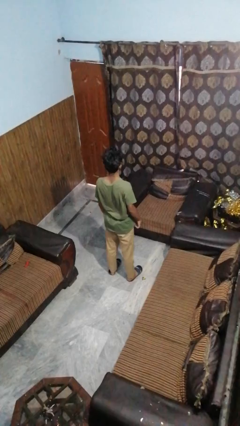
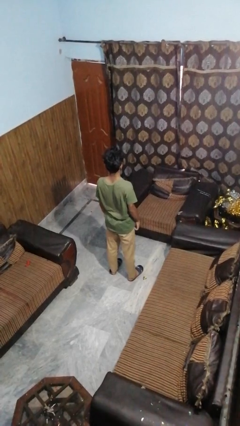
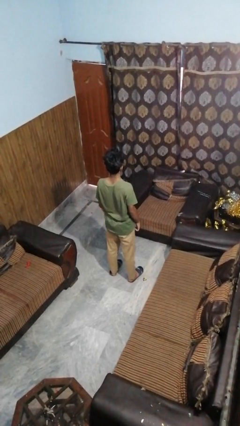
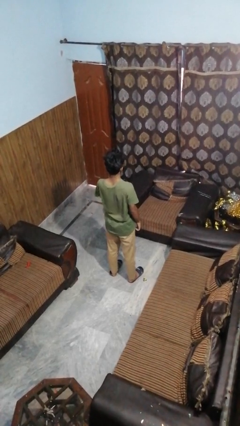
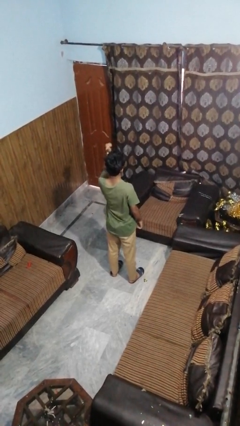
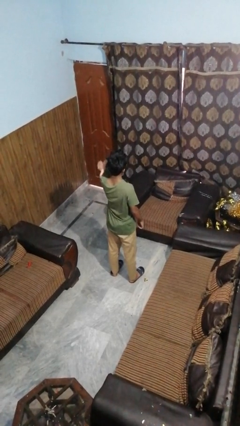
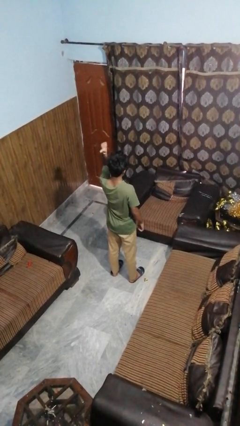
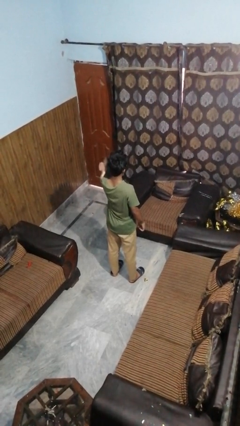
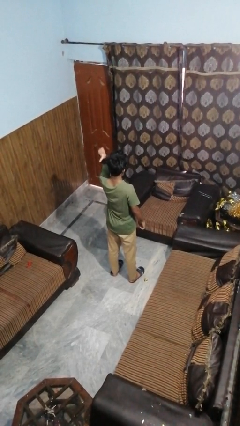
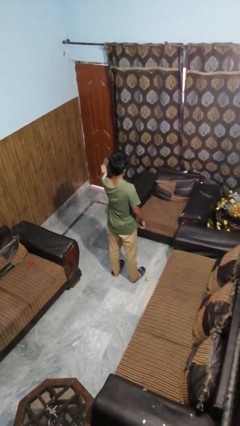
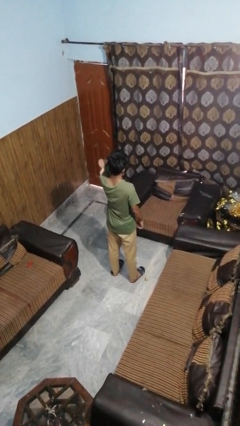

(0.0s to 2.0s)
person gestures behind me

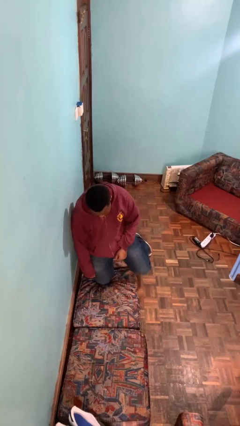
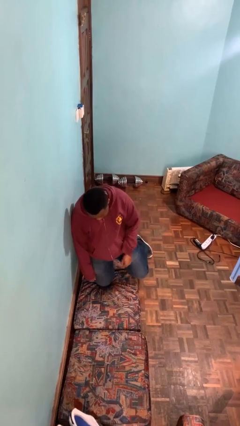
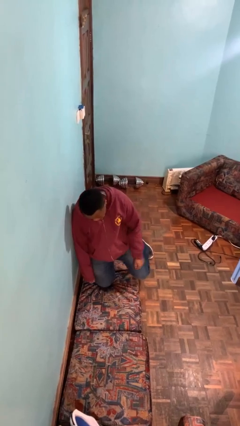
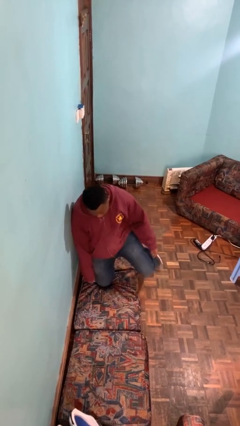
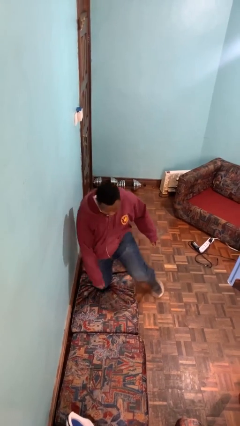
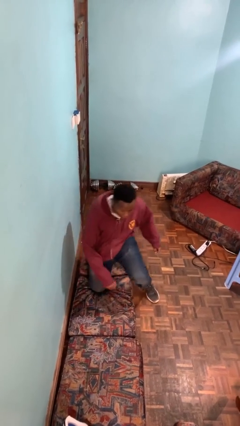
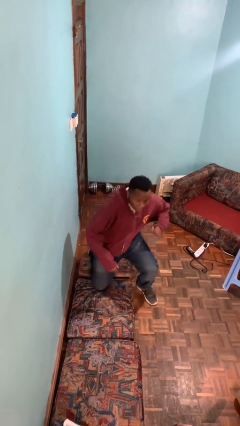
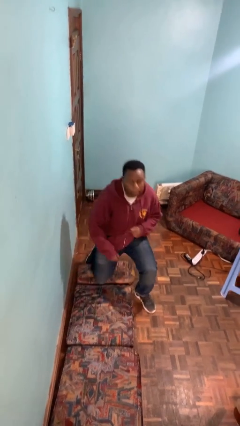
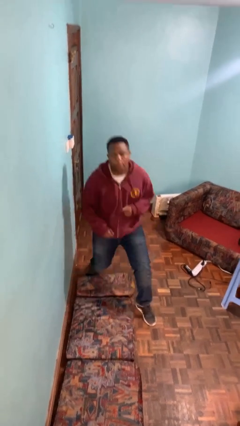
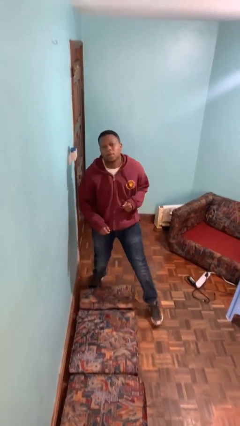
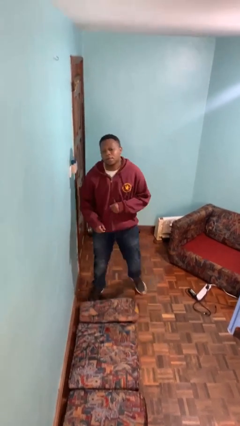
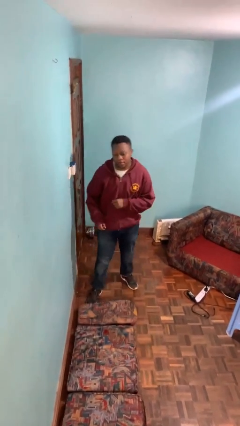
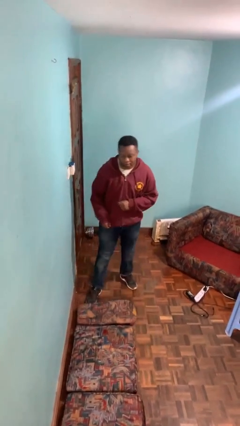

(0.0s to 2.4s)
person stands up from floor

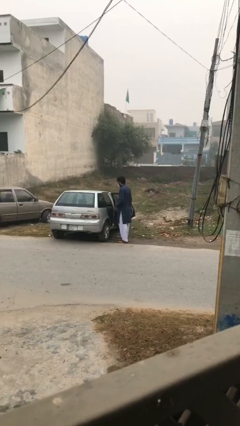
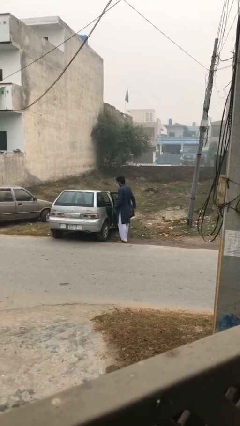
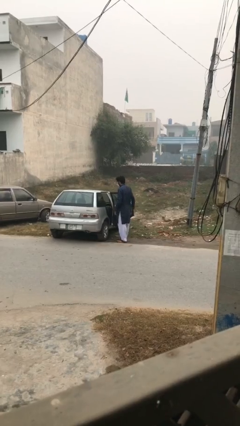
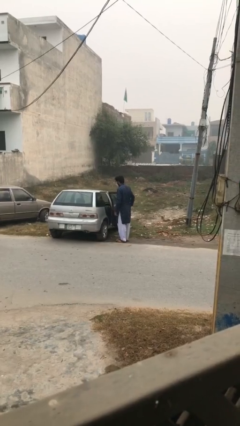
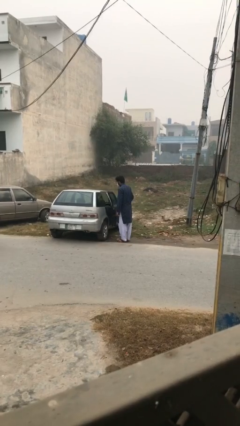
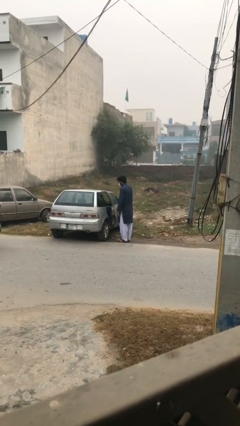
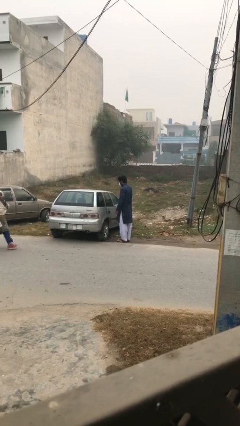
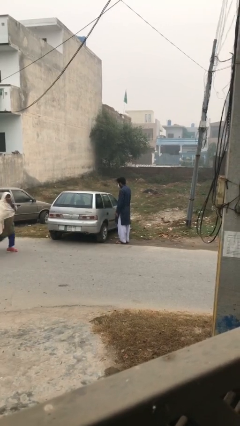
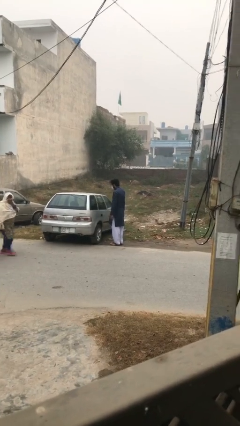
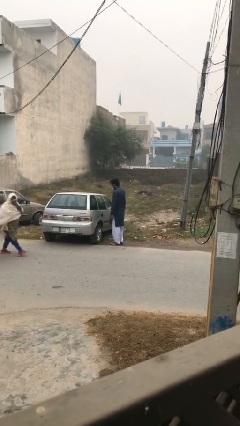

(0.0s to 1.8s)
person closes car door

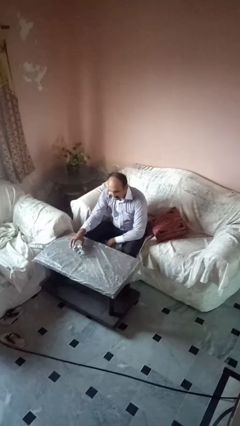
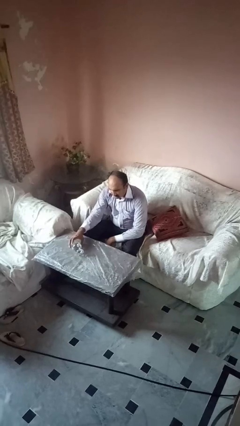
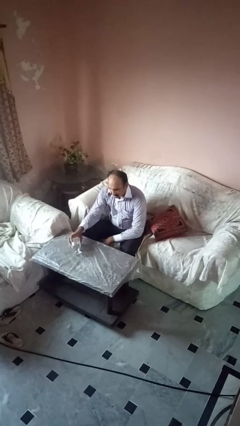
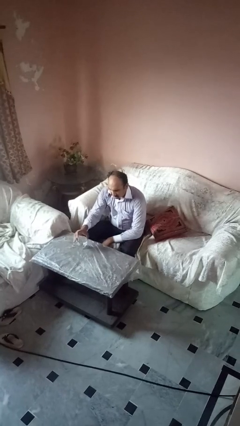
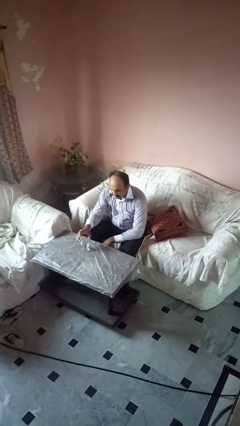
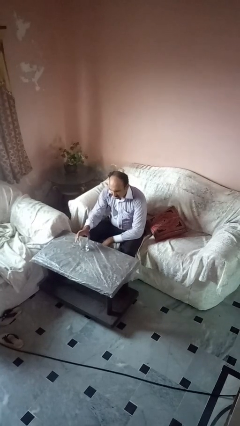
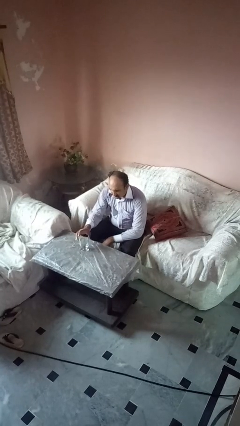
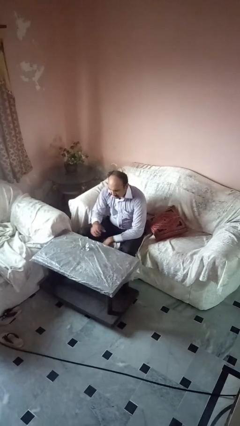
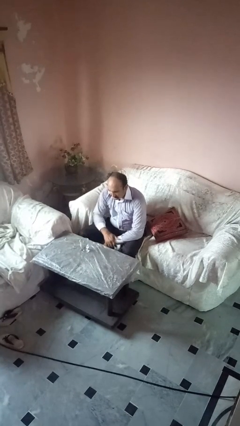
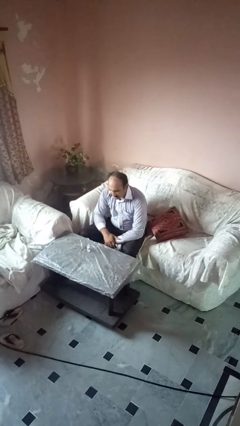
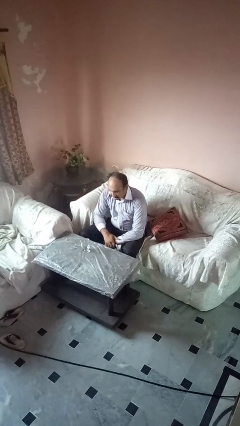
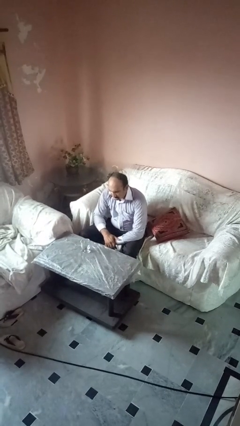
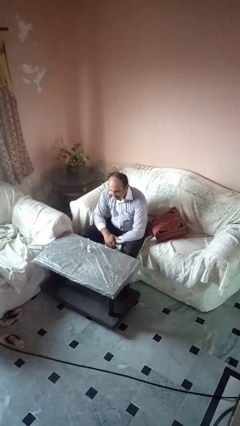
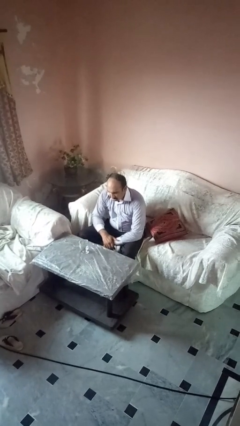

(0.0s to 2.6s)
person sets upright glass

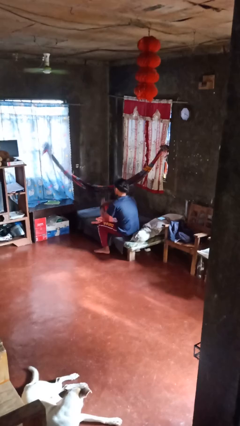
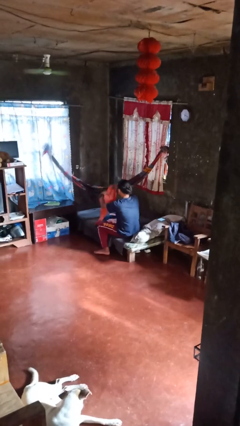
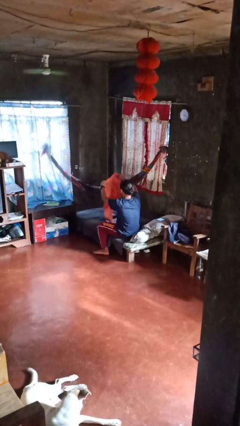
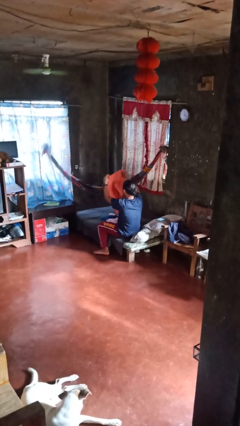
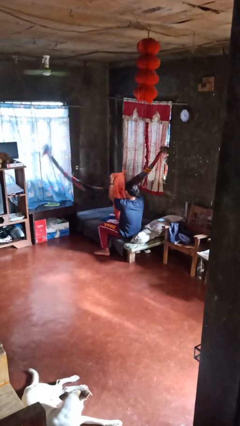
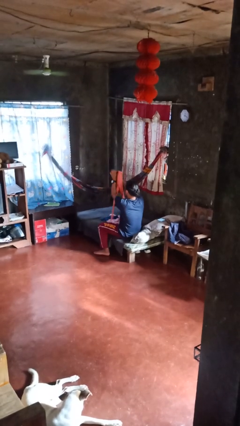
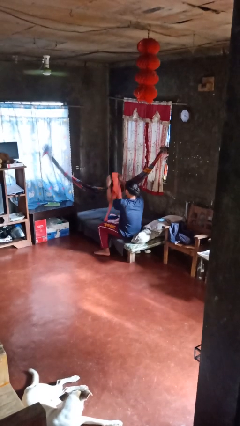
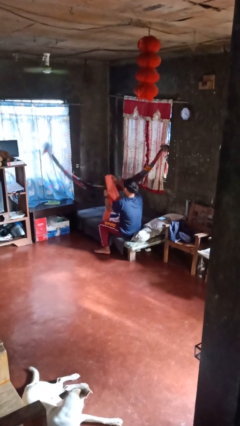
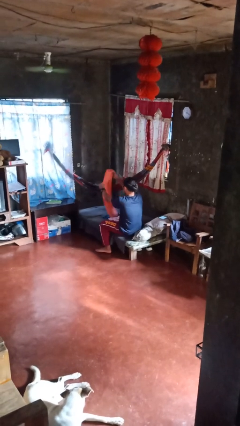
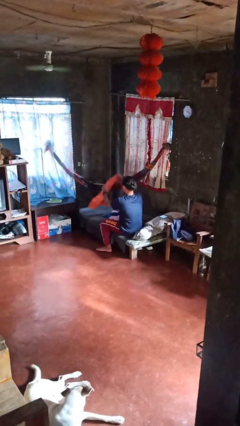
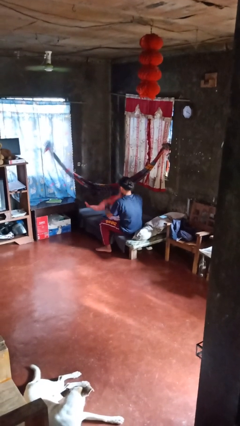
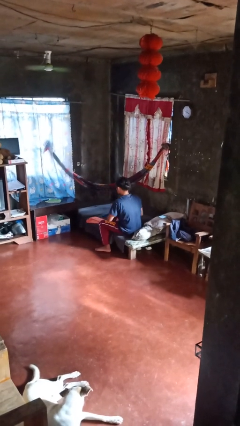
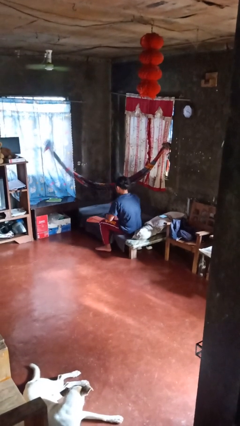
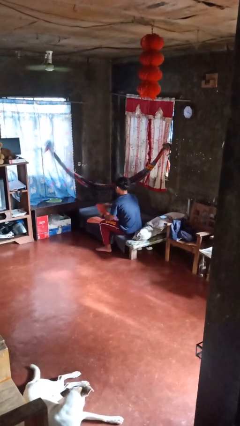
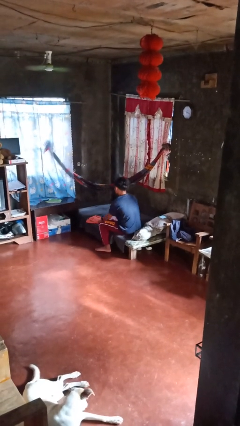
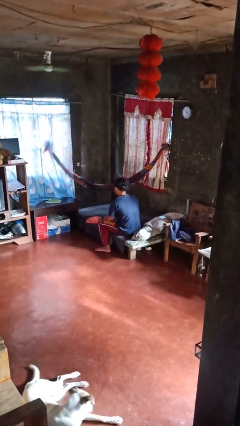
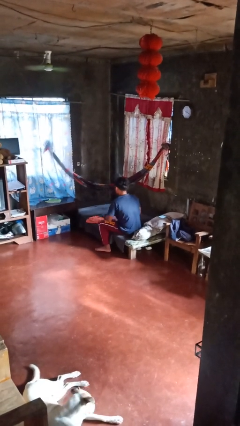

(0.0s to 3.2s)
person folds pants

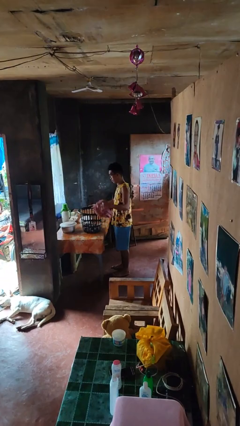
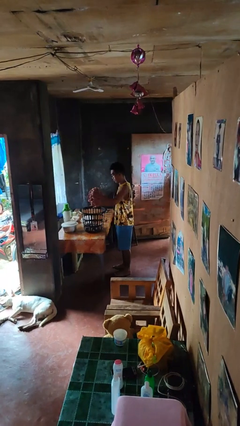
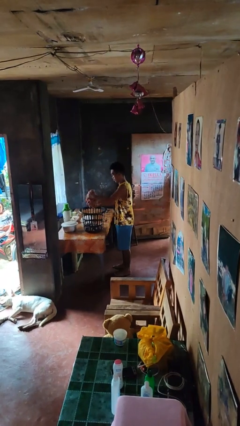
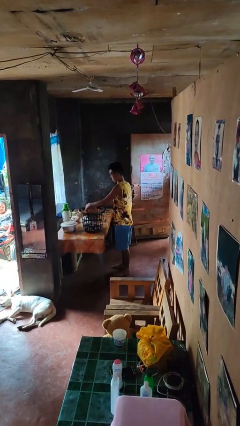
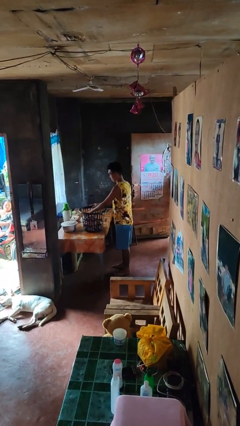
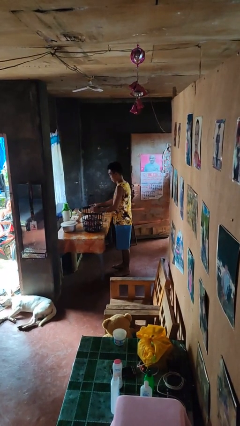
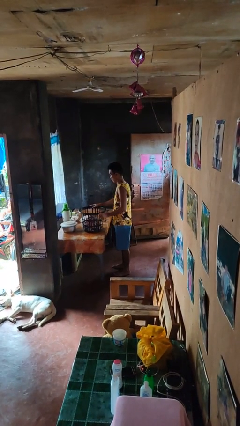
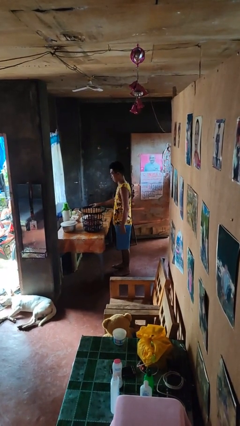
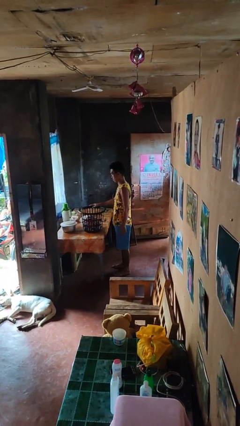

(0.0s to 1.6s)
person puts object into basket

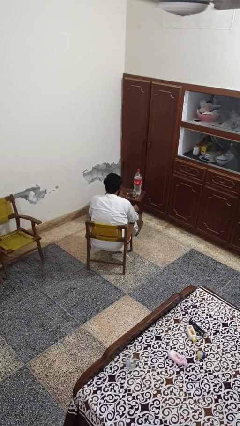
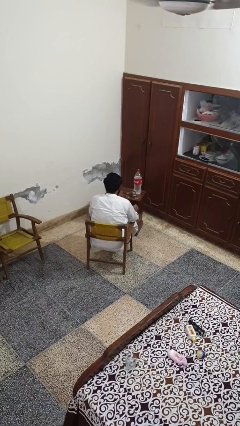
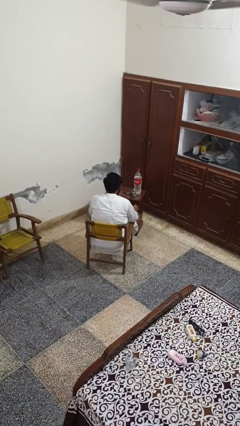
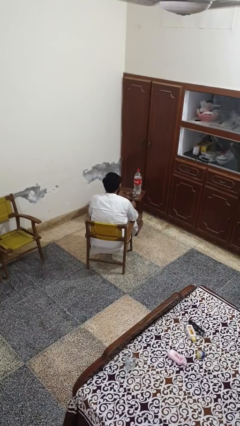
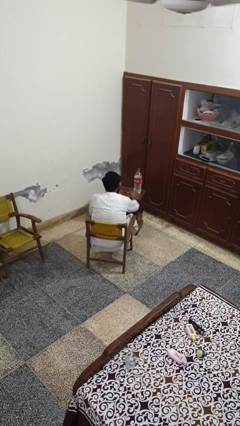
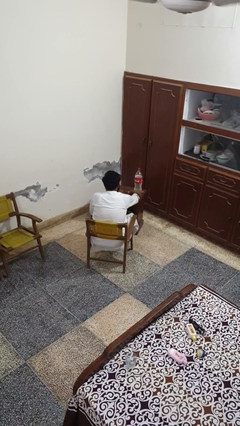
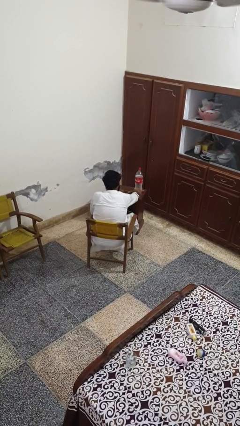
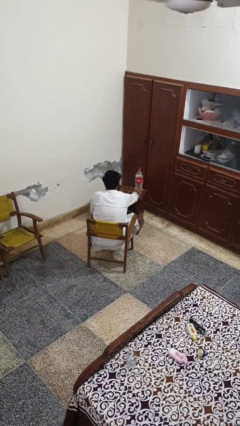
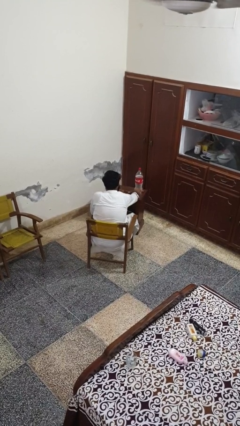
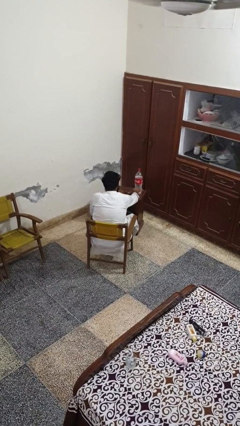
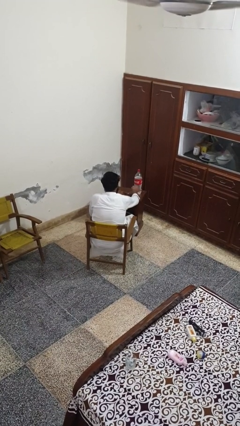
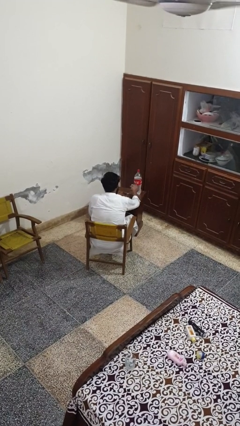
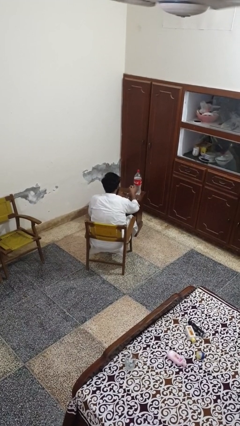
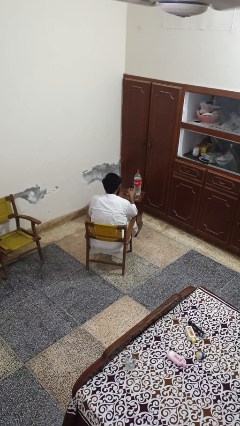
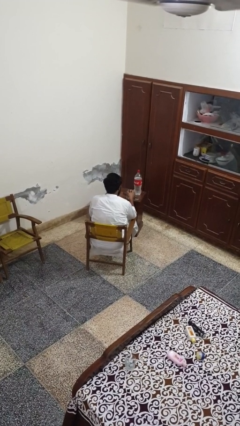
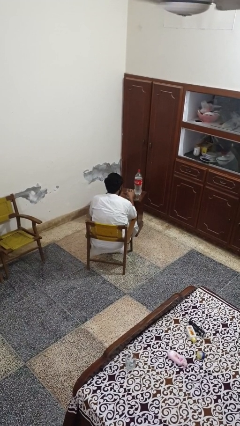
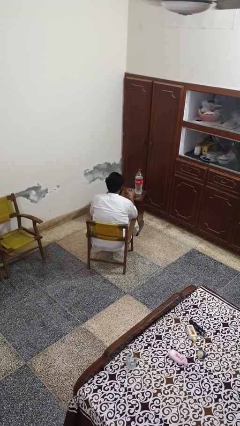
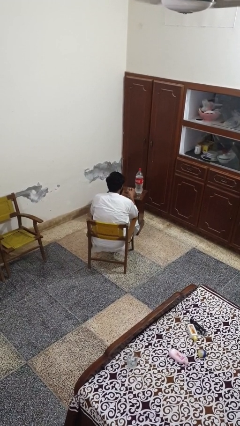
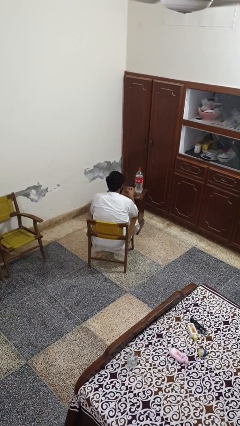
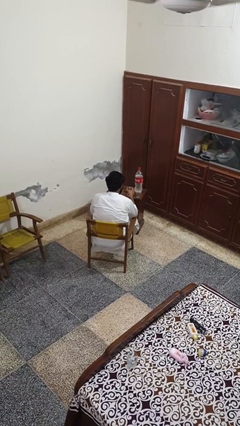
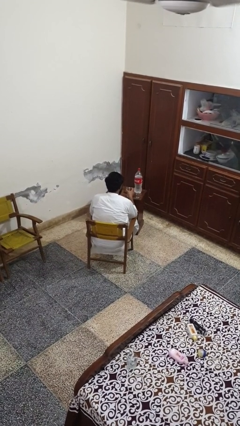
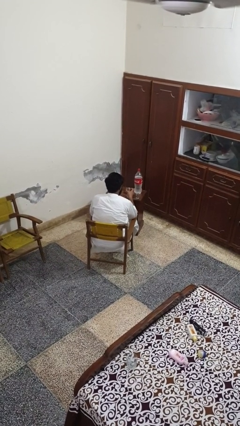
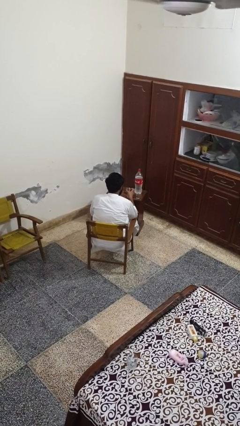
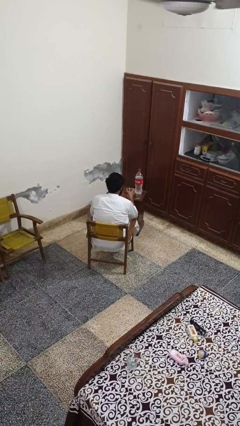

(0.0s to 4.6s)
person picks up object from table
